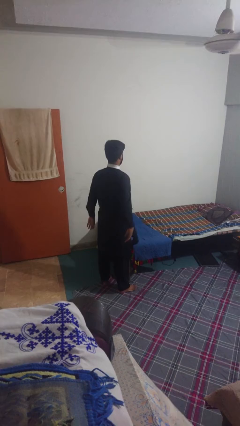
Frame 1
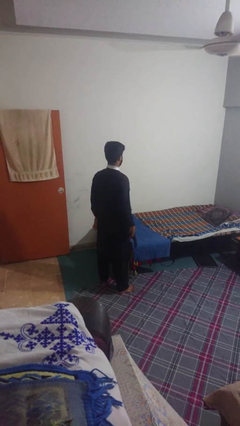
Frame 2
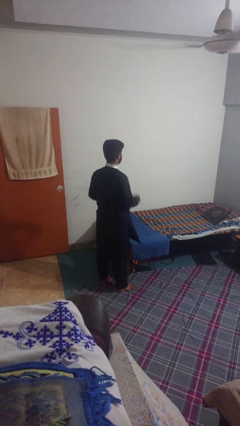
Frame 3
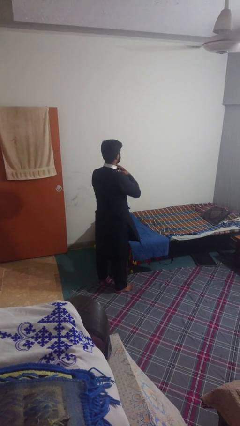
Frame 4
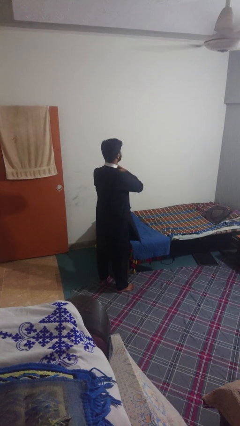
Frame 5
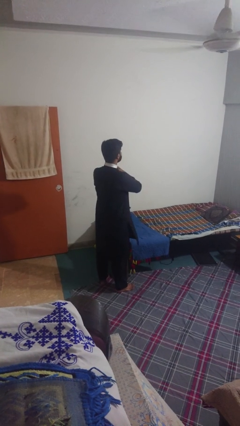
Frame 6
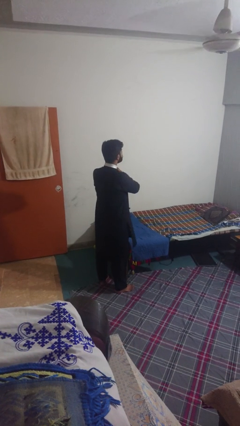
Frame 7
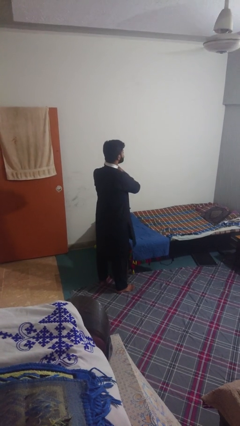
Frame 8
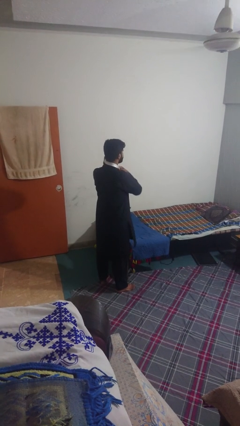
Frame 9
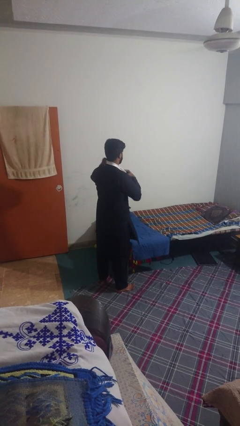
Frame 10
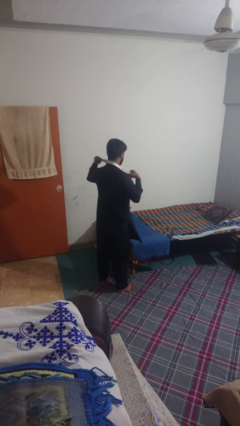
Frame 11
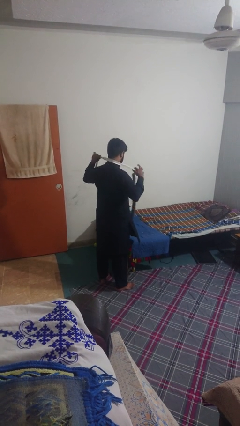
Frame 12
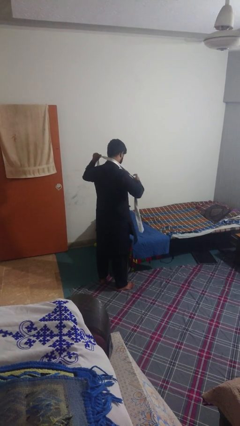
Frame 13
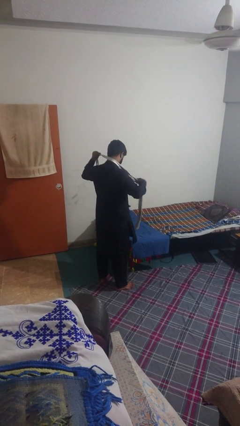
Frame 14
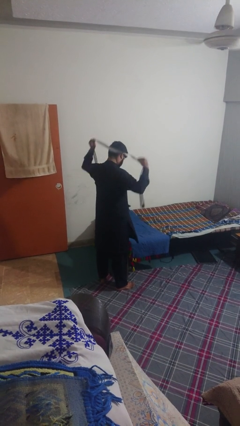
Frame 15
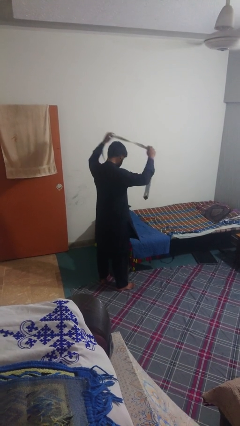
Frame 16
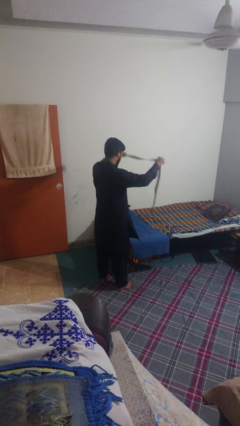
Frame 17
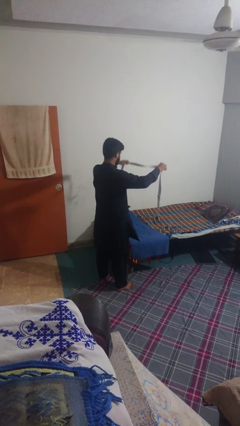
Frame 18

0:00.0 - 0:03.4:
person takes off necktie

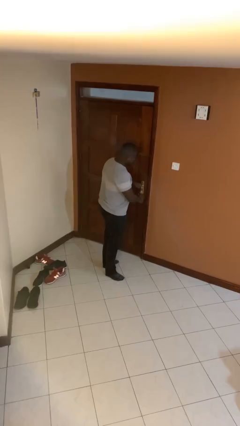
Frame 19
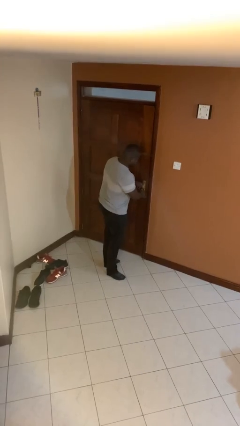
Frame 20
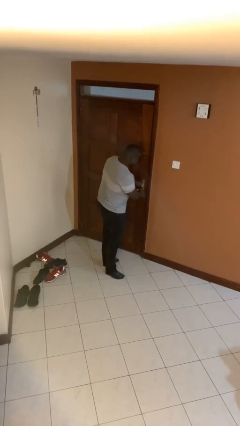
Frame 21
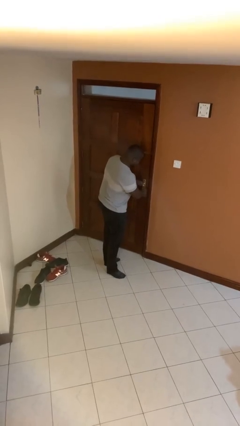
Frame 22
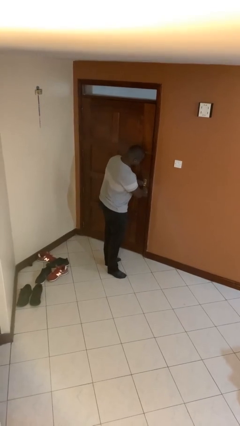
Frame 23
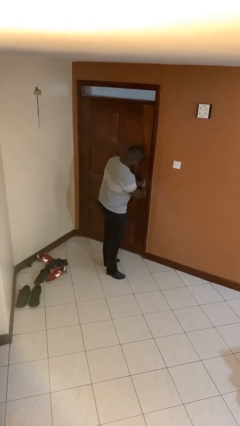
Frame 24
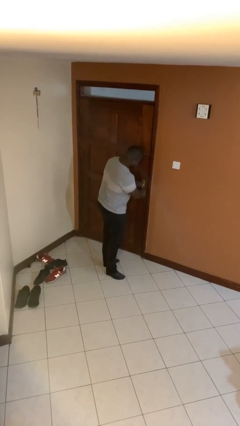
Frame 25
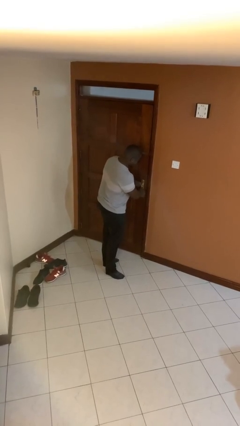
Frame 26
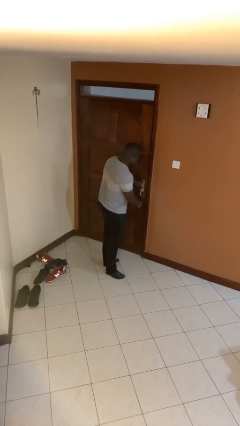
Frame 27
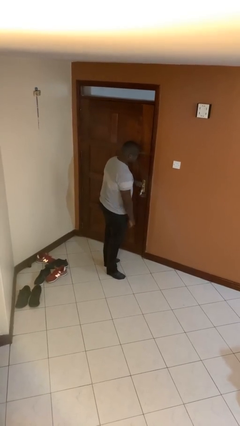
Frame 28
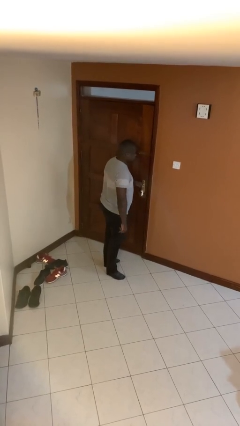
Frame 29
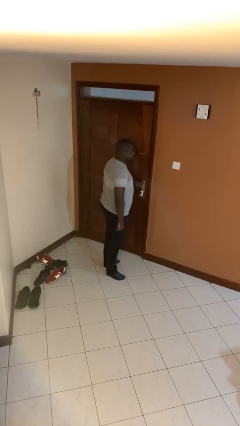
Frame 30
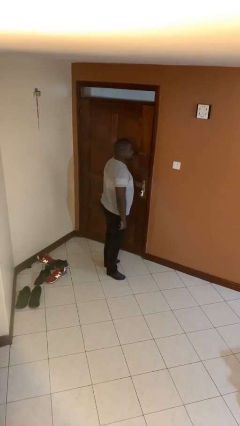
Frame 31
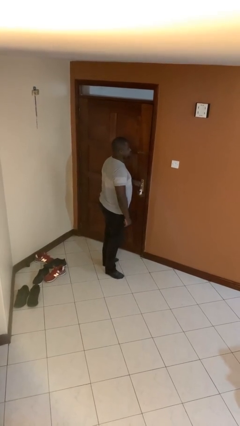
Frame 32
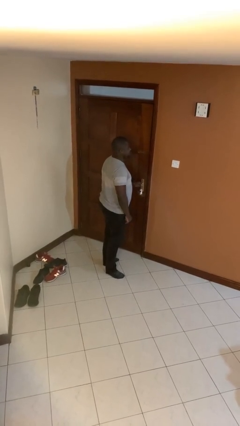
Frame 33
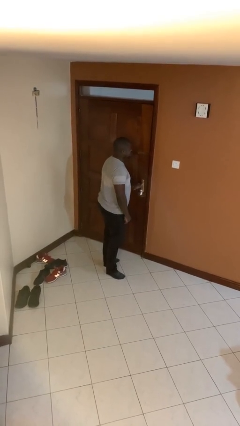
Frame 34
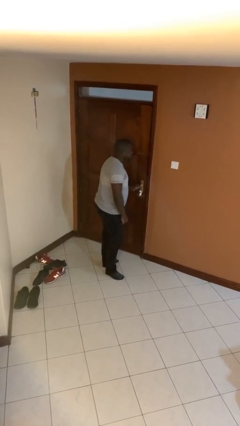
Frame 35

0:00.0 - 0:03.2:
person unlocks door with keys

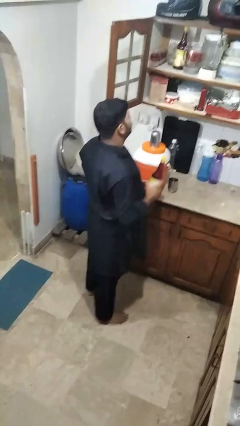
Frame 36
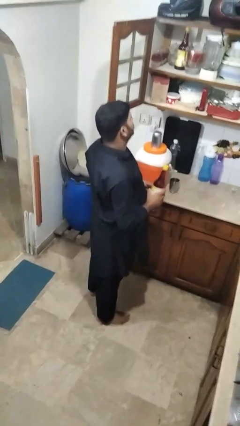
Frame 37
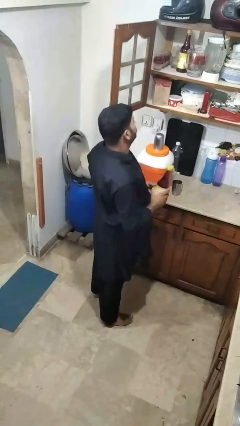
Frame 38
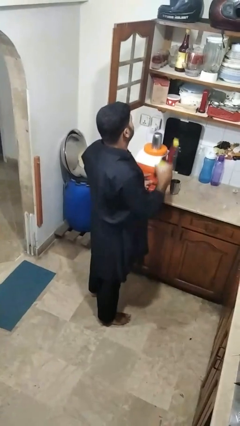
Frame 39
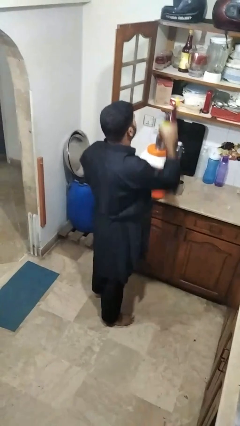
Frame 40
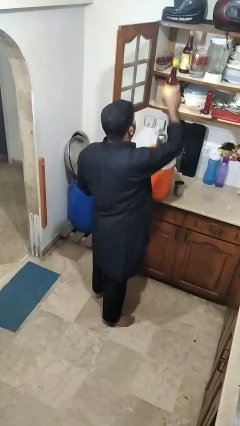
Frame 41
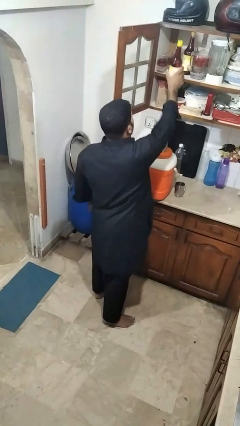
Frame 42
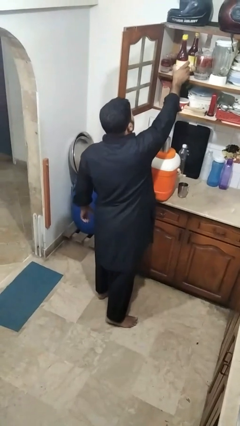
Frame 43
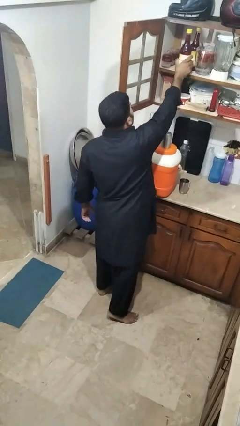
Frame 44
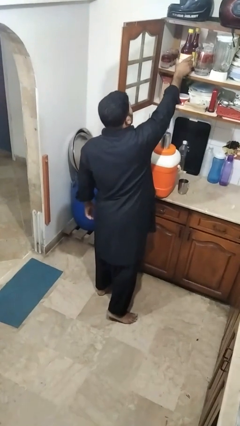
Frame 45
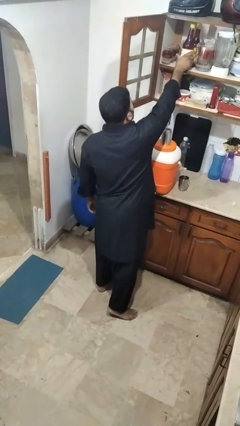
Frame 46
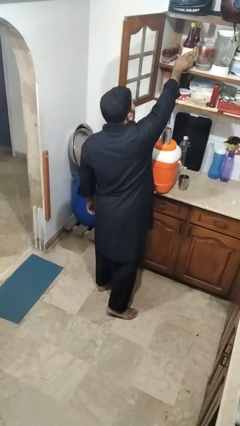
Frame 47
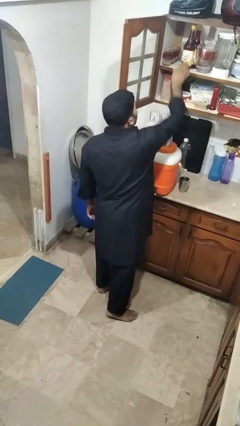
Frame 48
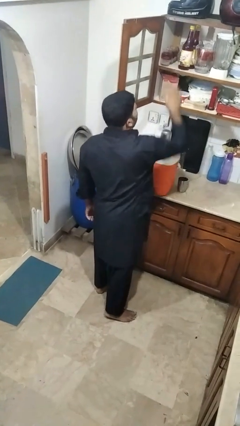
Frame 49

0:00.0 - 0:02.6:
person puts down object into cabinet

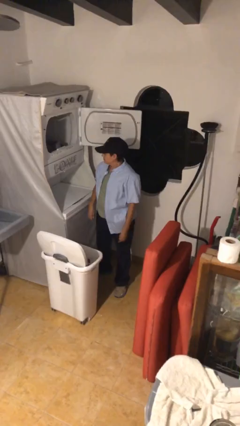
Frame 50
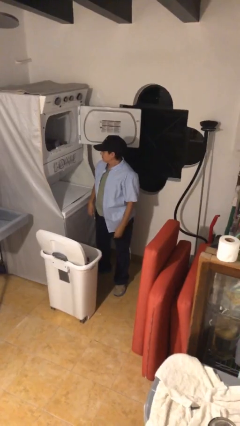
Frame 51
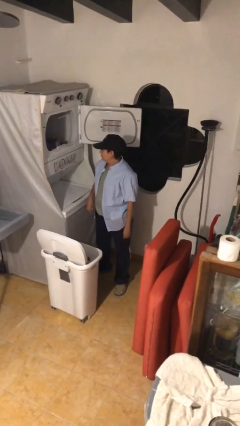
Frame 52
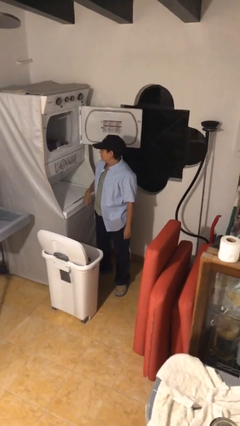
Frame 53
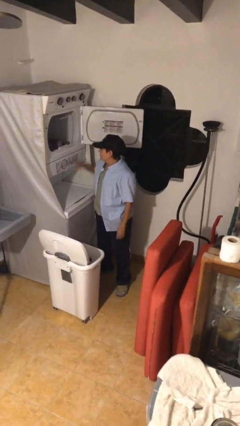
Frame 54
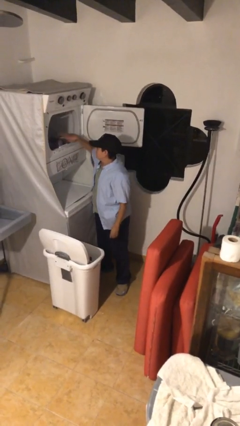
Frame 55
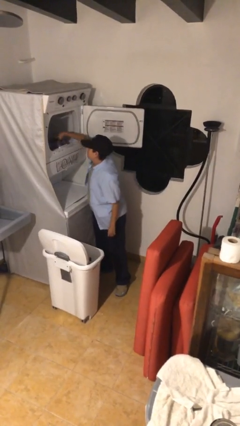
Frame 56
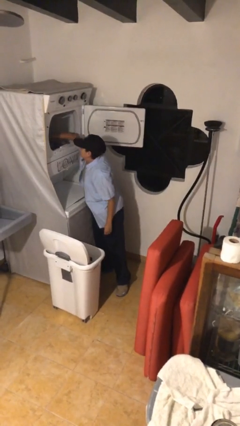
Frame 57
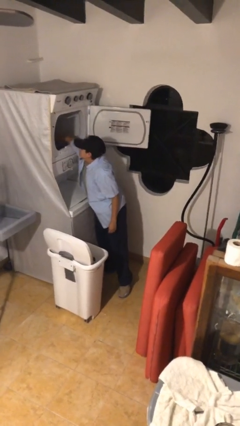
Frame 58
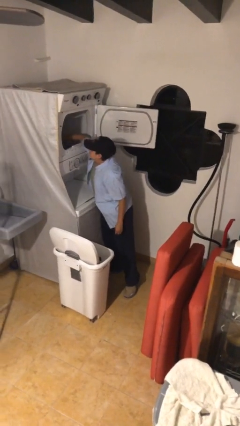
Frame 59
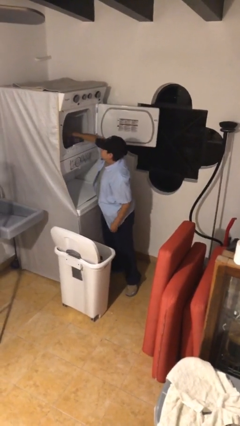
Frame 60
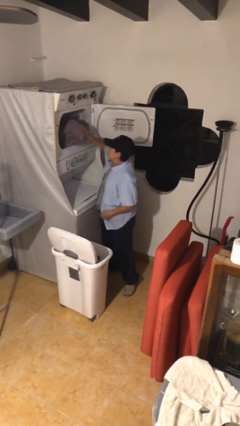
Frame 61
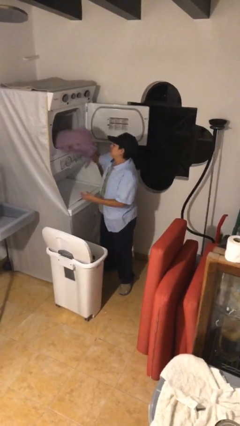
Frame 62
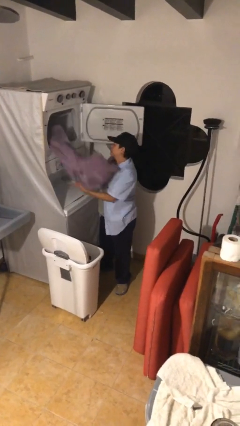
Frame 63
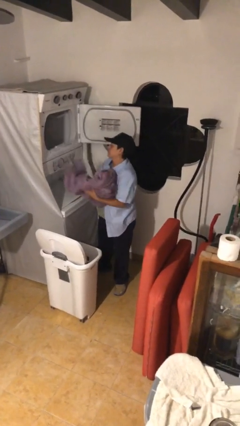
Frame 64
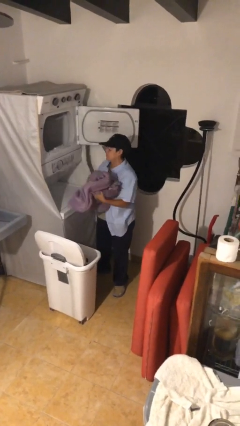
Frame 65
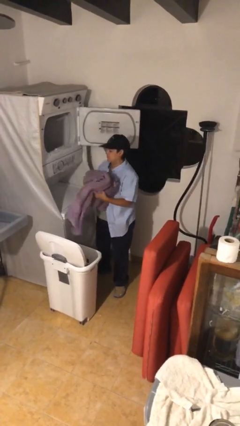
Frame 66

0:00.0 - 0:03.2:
person unloads dryer

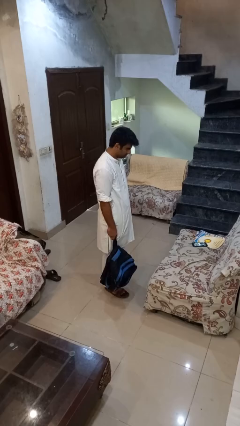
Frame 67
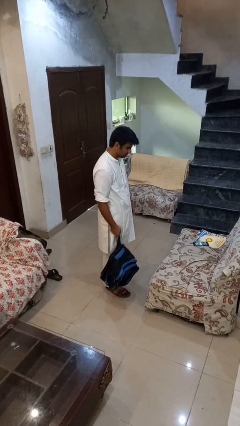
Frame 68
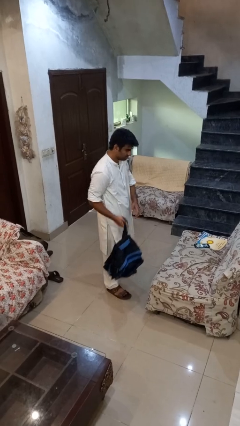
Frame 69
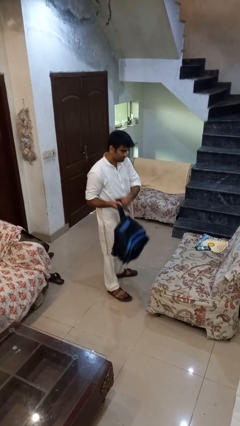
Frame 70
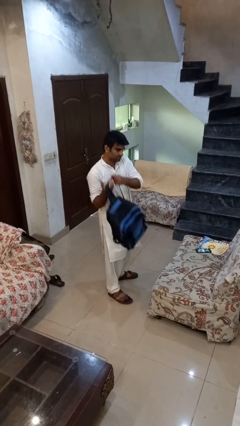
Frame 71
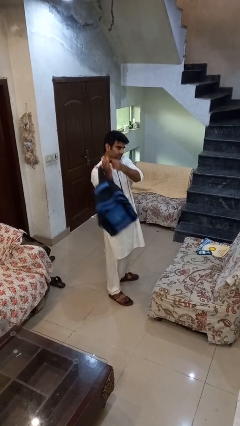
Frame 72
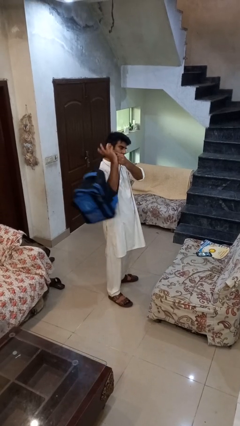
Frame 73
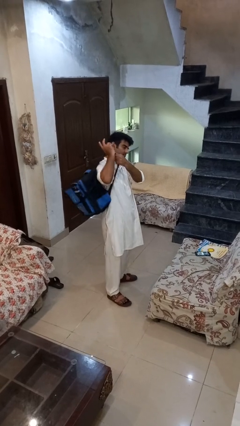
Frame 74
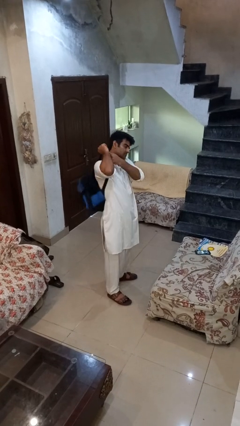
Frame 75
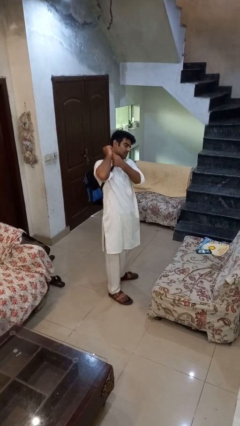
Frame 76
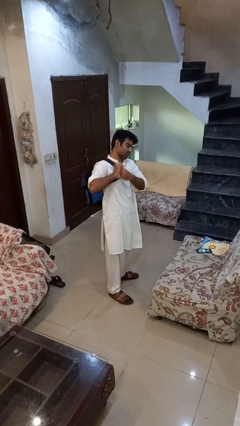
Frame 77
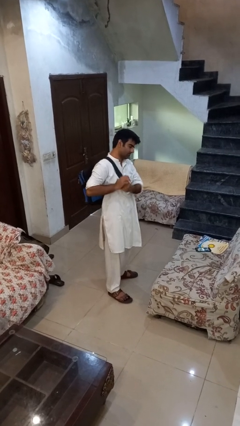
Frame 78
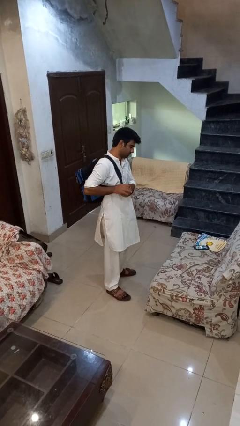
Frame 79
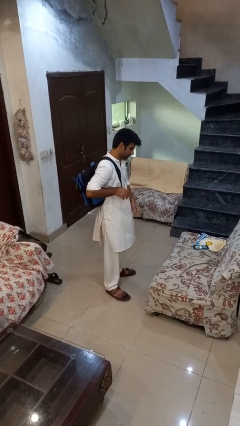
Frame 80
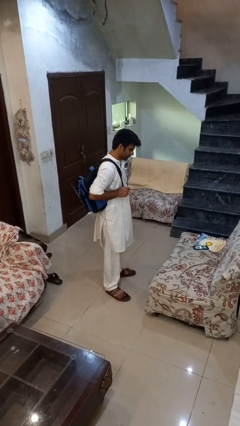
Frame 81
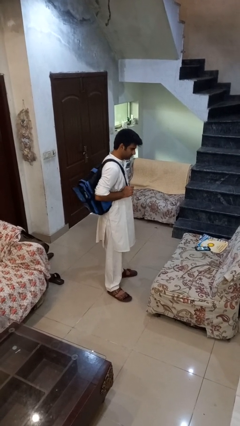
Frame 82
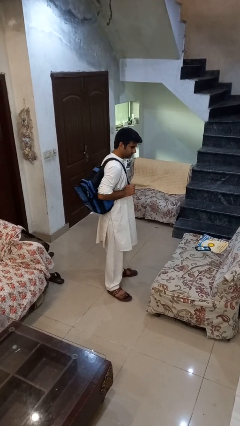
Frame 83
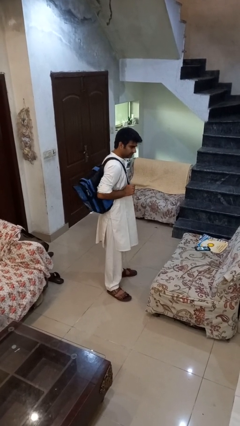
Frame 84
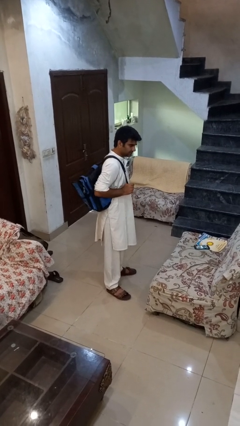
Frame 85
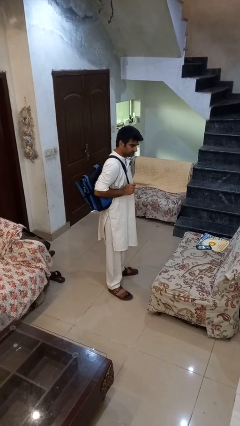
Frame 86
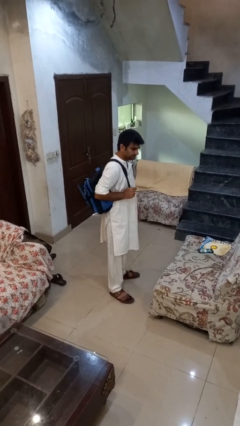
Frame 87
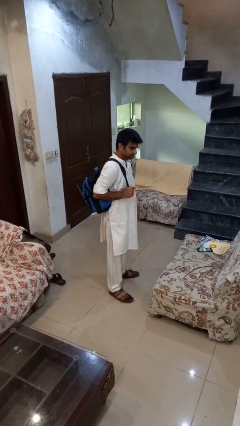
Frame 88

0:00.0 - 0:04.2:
person puts on backpack

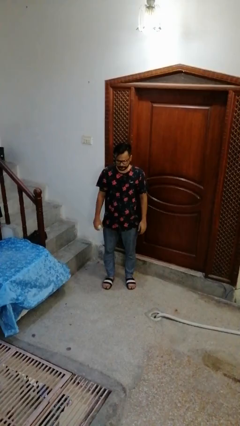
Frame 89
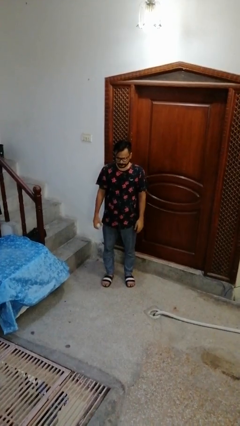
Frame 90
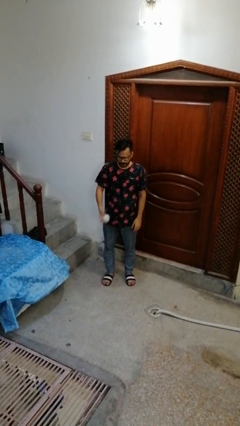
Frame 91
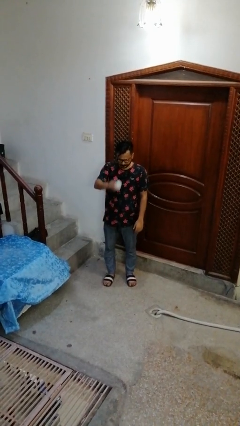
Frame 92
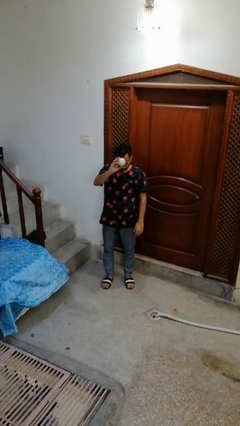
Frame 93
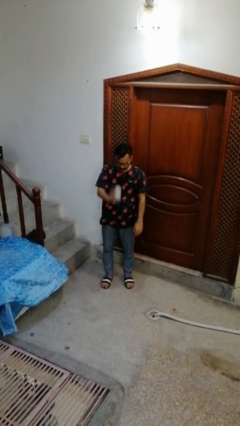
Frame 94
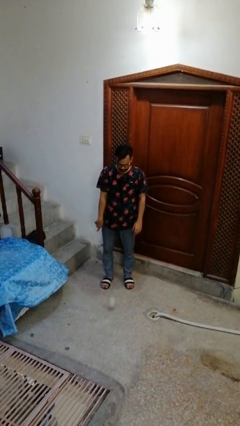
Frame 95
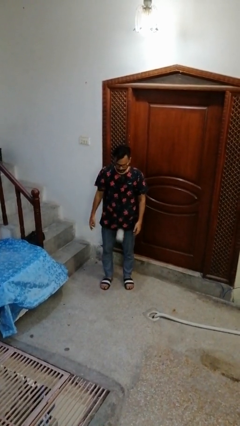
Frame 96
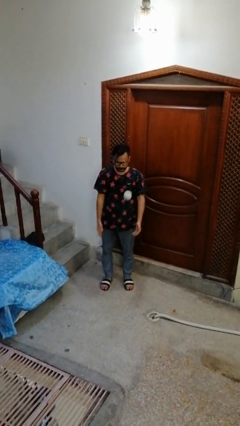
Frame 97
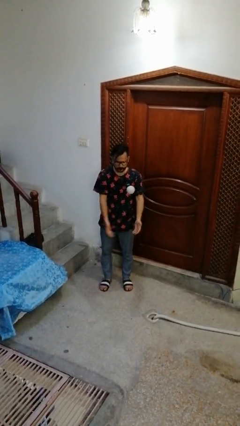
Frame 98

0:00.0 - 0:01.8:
person bounces ball on floor
